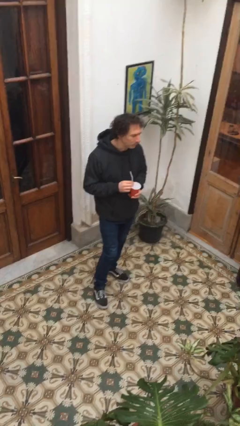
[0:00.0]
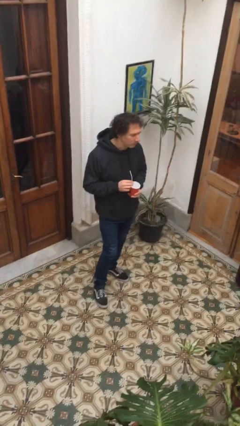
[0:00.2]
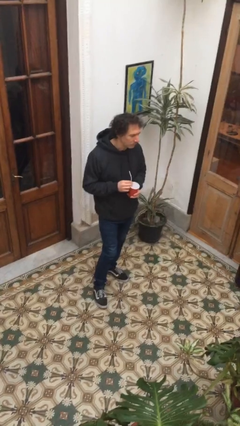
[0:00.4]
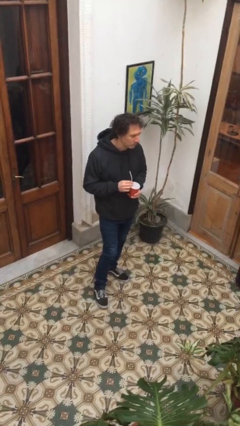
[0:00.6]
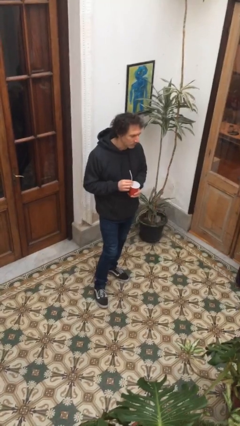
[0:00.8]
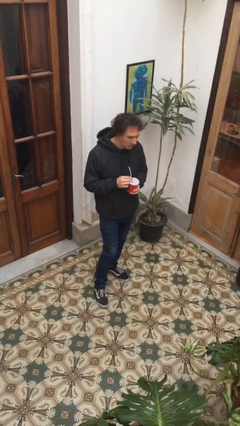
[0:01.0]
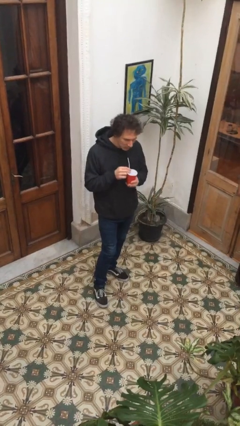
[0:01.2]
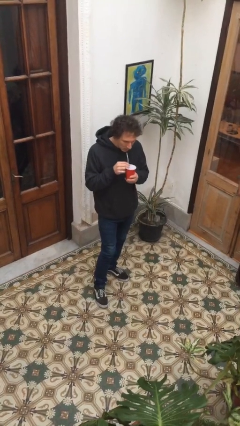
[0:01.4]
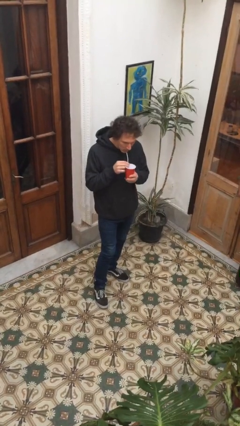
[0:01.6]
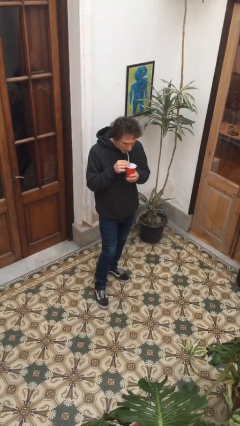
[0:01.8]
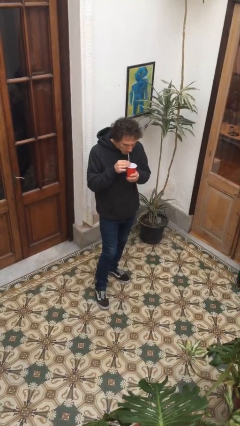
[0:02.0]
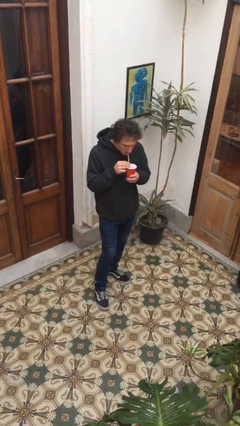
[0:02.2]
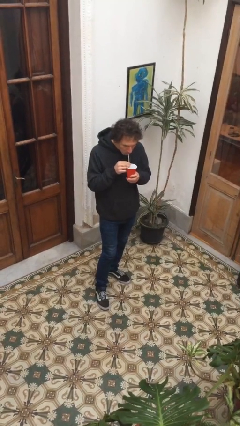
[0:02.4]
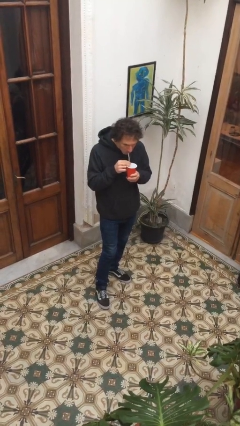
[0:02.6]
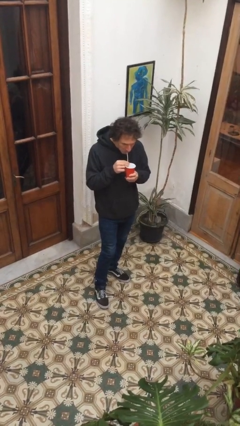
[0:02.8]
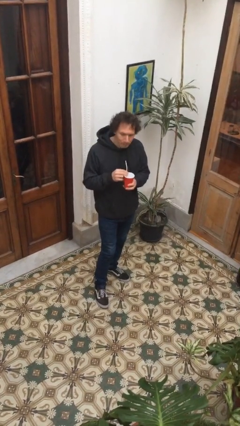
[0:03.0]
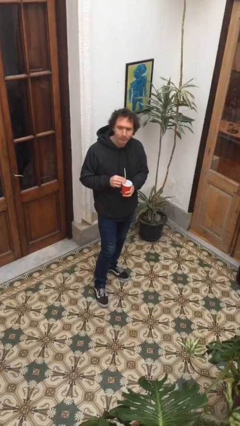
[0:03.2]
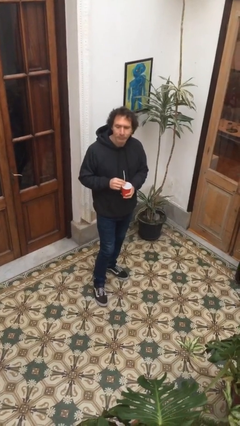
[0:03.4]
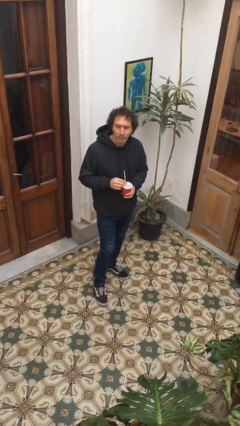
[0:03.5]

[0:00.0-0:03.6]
person drinks from straw

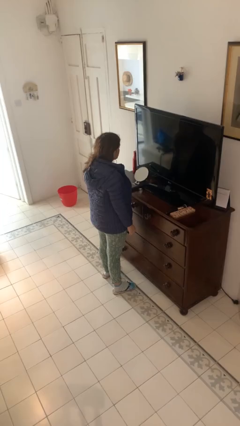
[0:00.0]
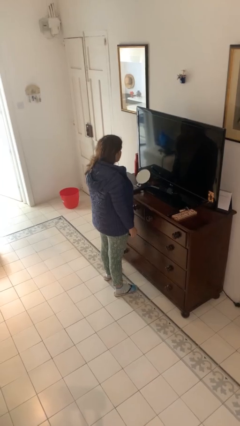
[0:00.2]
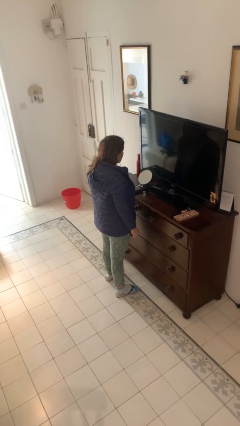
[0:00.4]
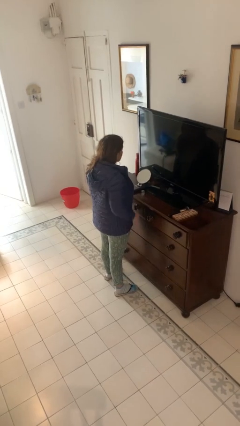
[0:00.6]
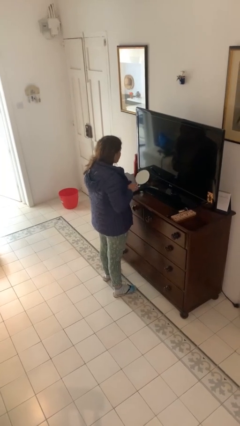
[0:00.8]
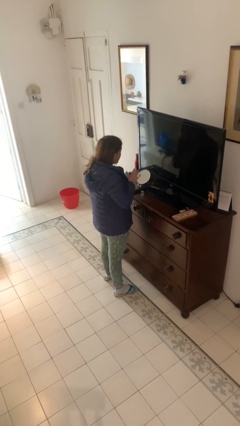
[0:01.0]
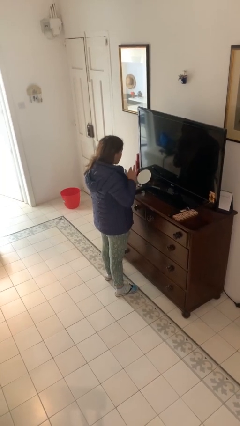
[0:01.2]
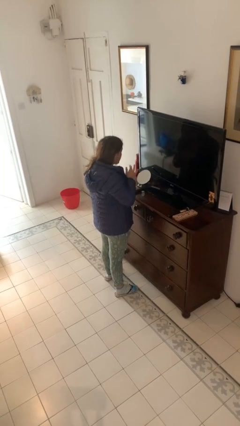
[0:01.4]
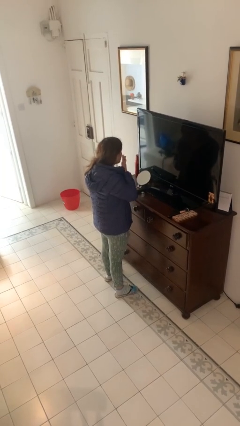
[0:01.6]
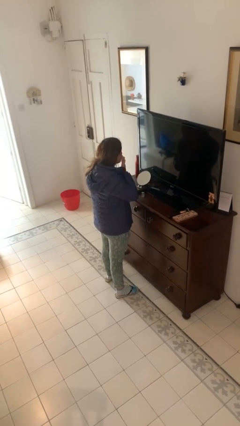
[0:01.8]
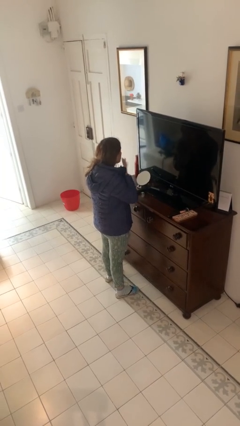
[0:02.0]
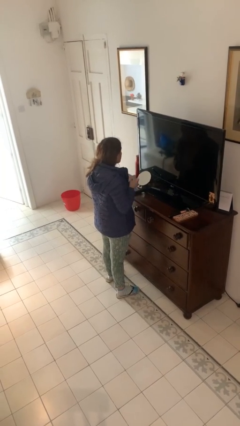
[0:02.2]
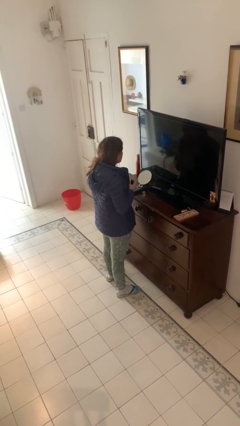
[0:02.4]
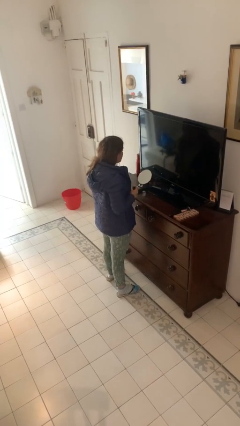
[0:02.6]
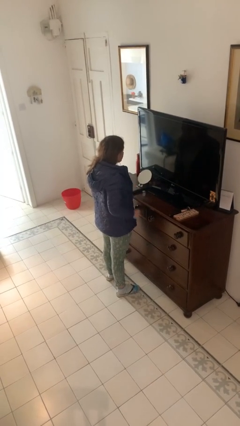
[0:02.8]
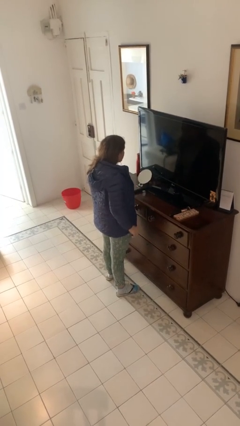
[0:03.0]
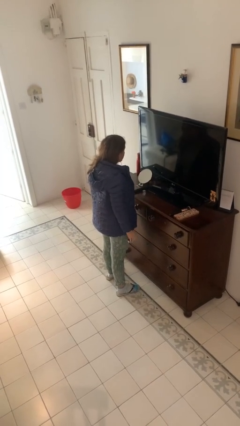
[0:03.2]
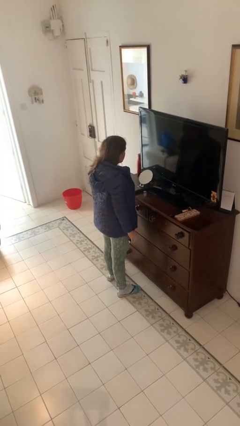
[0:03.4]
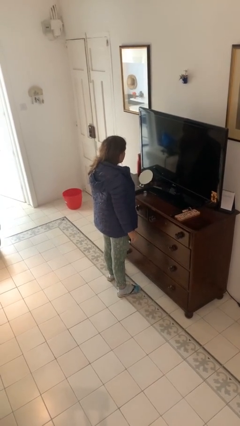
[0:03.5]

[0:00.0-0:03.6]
person applies foundation makeup

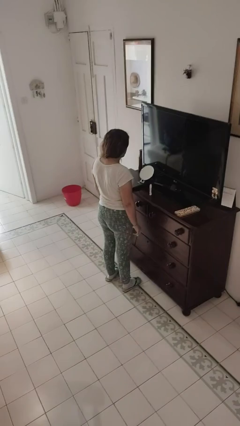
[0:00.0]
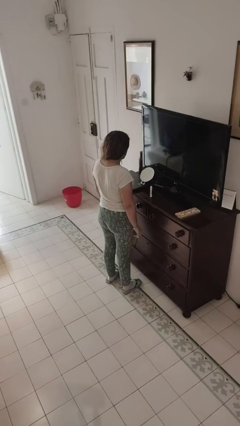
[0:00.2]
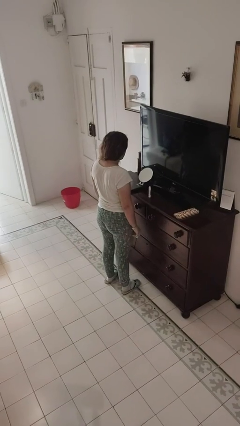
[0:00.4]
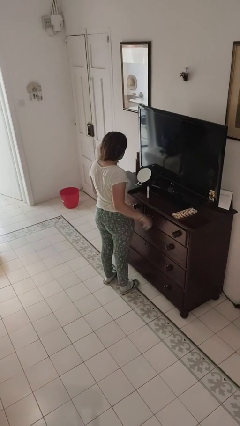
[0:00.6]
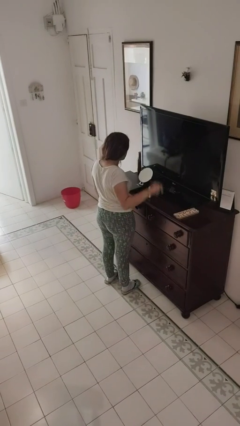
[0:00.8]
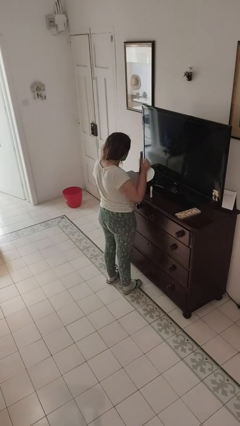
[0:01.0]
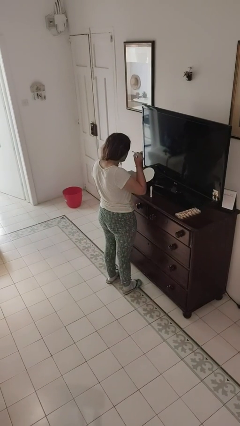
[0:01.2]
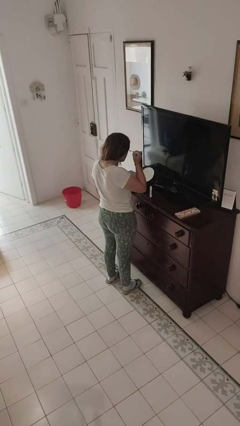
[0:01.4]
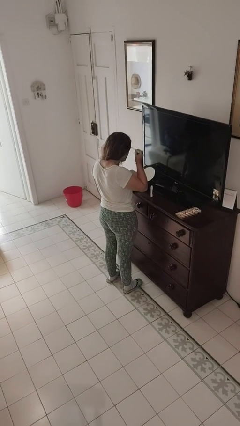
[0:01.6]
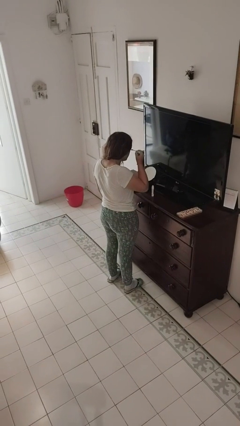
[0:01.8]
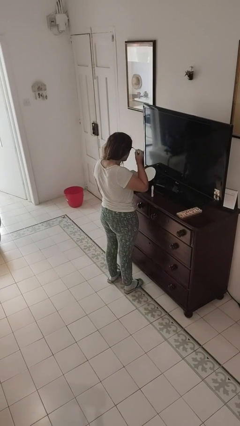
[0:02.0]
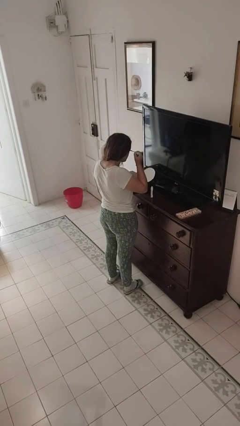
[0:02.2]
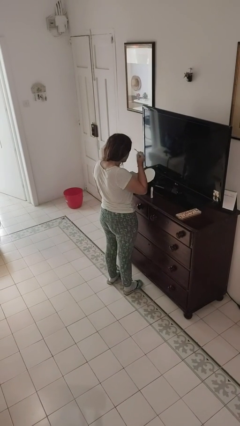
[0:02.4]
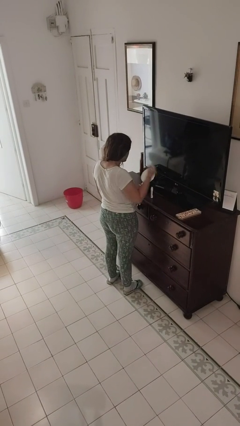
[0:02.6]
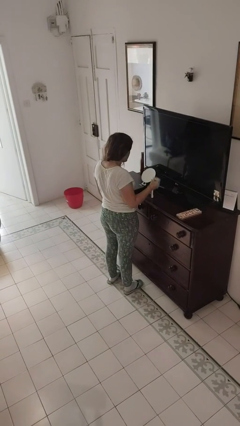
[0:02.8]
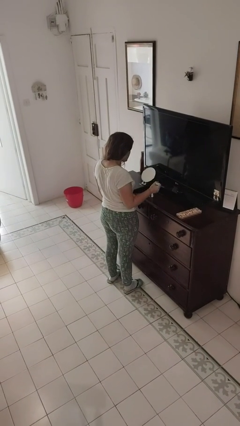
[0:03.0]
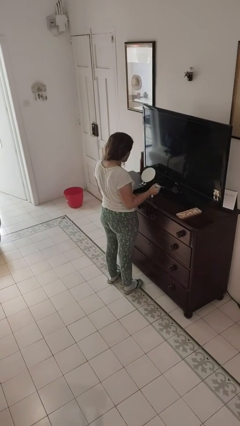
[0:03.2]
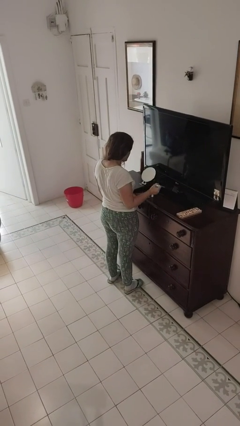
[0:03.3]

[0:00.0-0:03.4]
person applies eye makeup

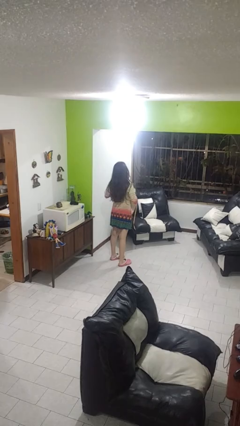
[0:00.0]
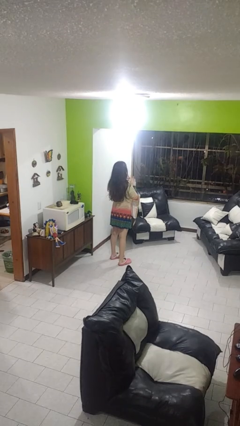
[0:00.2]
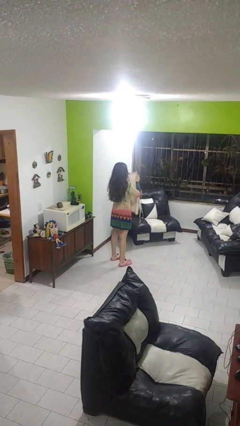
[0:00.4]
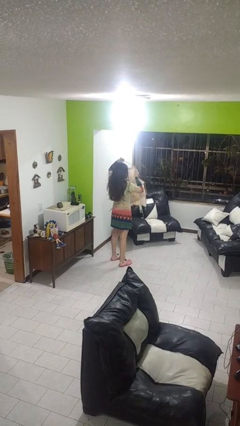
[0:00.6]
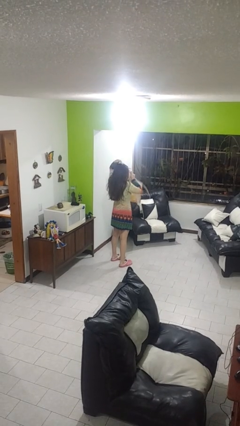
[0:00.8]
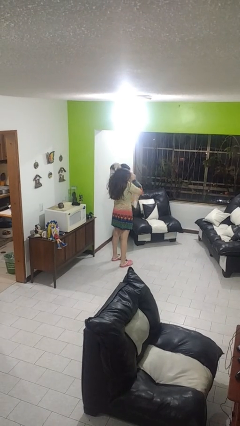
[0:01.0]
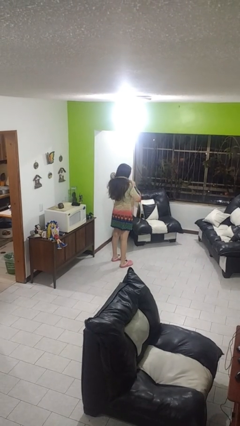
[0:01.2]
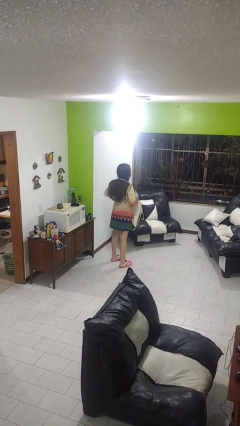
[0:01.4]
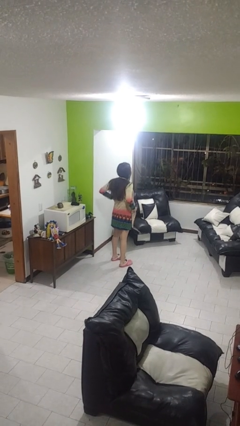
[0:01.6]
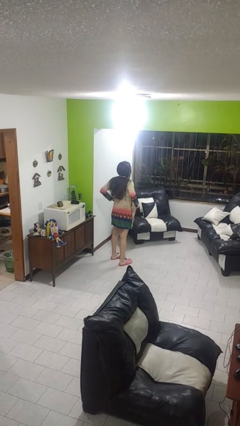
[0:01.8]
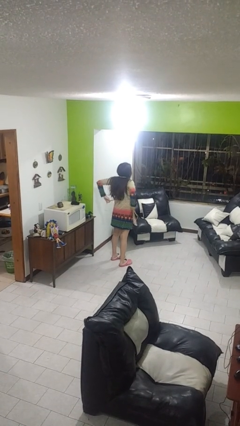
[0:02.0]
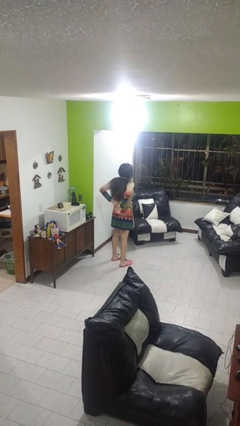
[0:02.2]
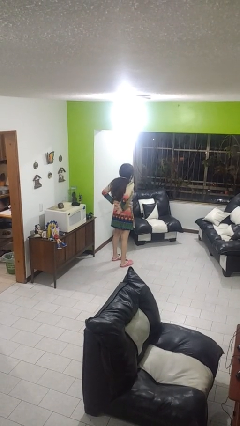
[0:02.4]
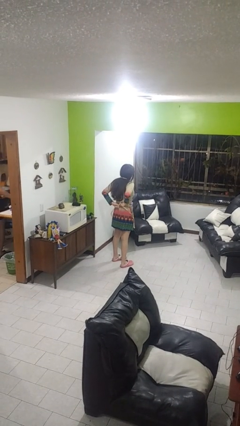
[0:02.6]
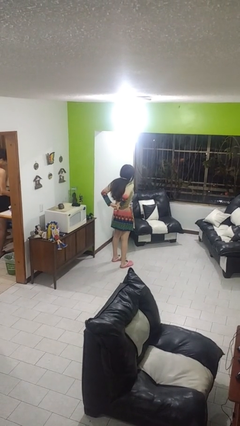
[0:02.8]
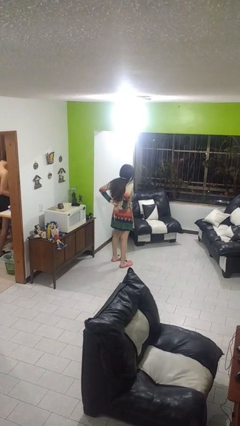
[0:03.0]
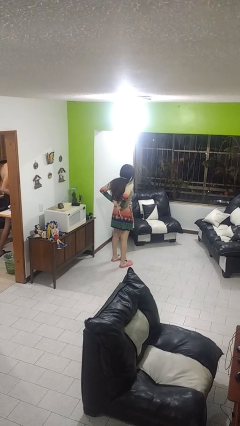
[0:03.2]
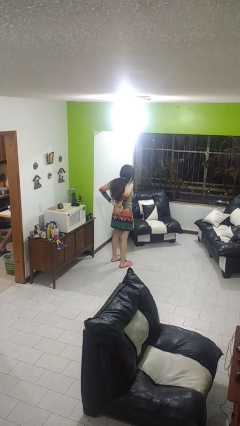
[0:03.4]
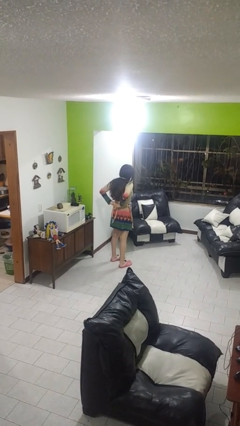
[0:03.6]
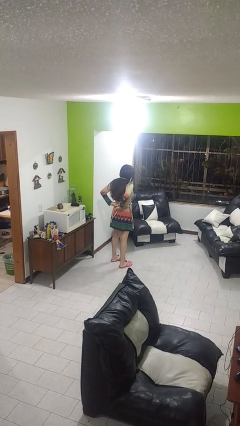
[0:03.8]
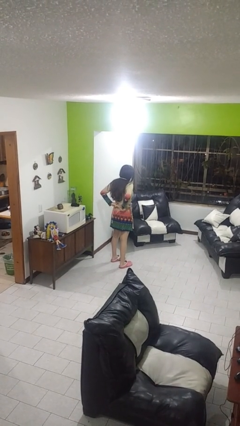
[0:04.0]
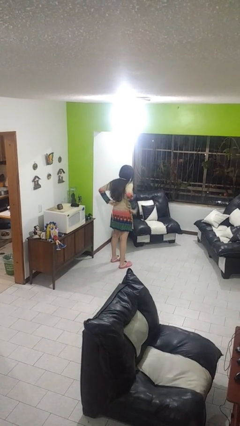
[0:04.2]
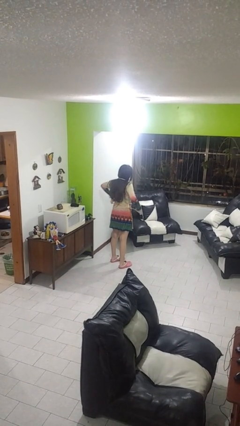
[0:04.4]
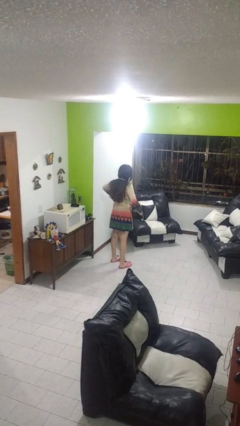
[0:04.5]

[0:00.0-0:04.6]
person puts on apron

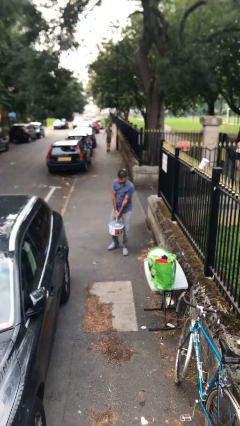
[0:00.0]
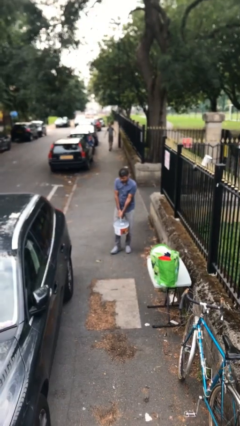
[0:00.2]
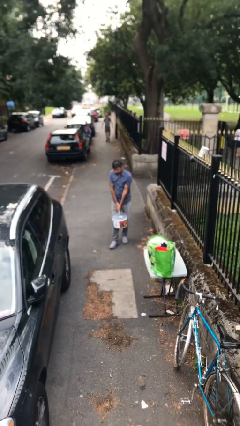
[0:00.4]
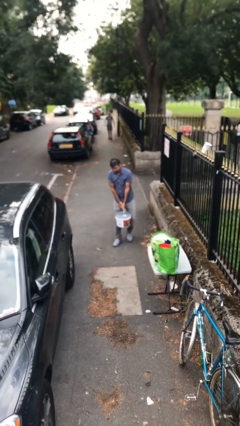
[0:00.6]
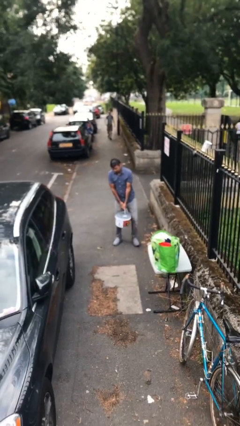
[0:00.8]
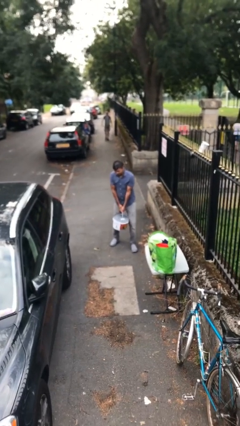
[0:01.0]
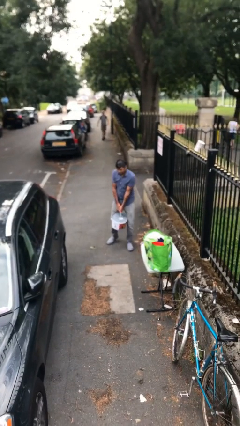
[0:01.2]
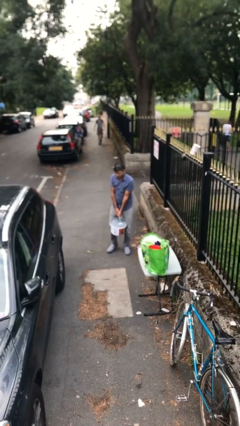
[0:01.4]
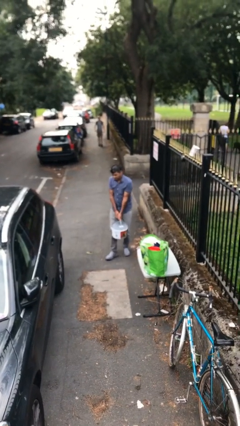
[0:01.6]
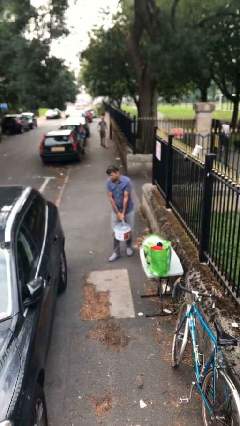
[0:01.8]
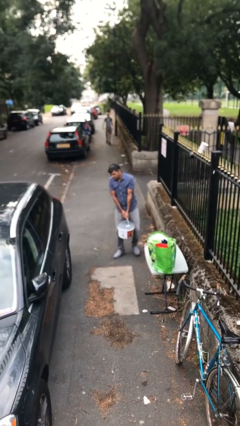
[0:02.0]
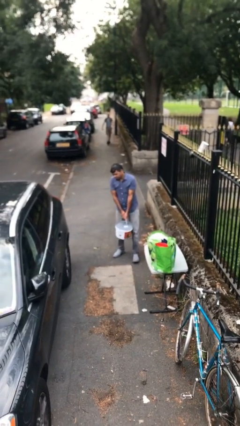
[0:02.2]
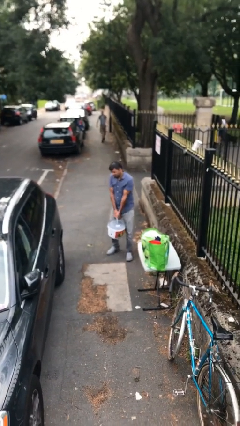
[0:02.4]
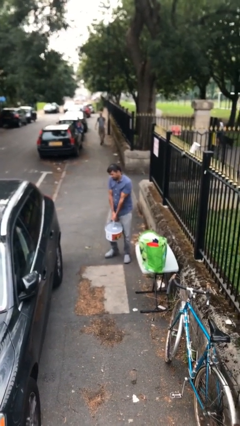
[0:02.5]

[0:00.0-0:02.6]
person carries heavy object

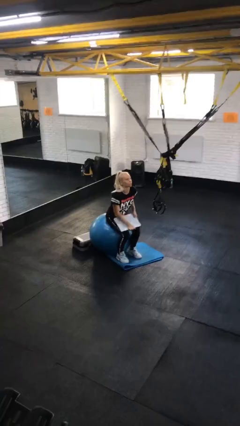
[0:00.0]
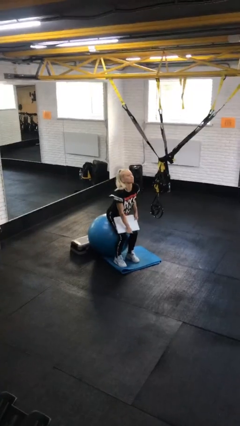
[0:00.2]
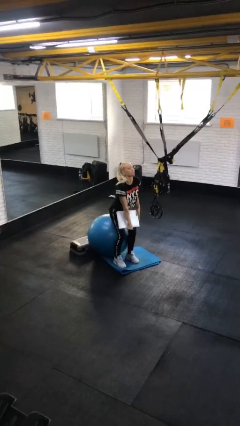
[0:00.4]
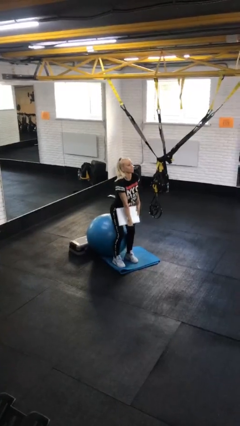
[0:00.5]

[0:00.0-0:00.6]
person stands up
